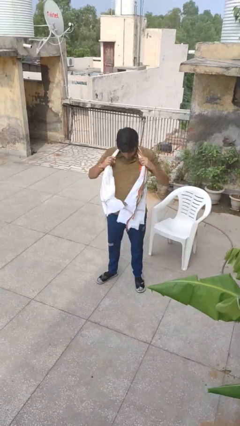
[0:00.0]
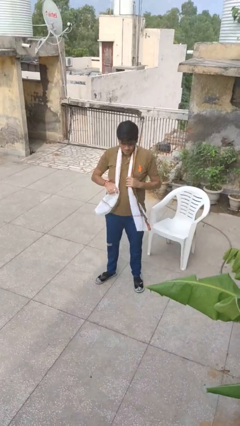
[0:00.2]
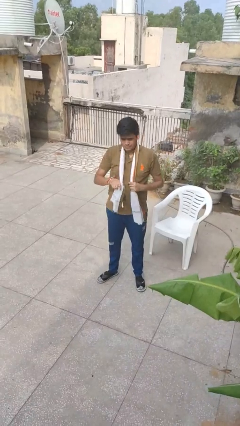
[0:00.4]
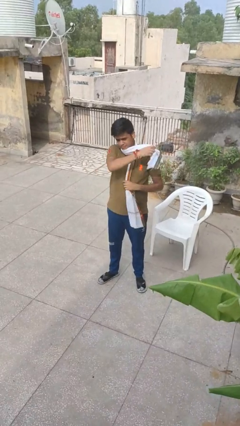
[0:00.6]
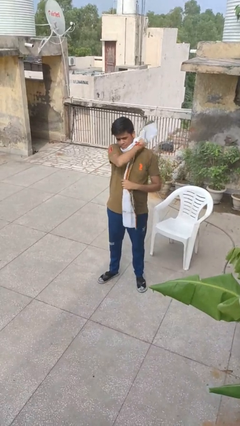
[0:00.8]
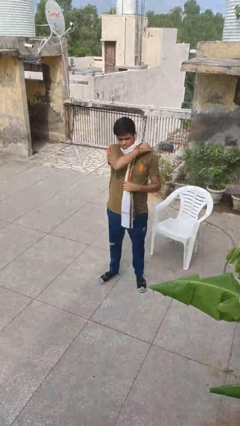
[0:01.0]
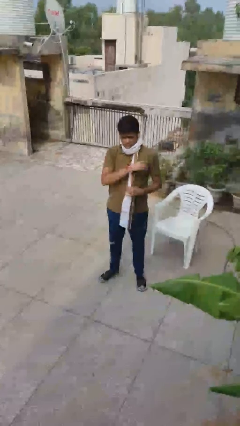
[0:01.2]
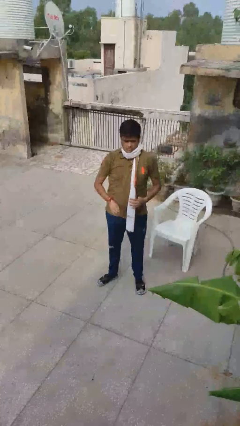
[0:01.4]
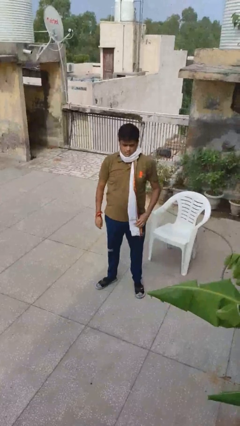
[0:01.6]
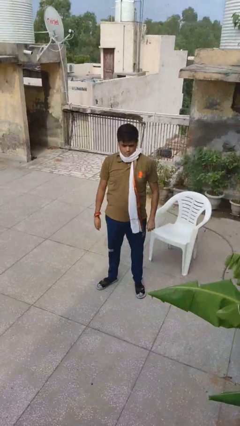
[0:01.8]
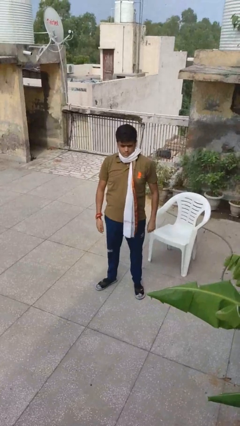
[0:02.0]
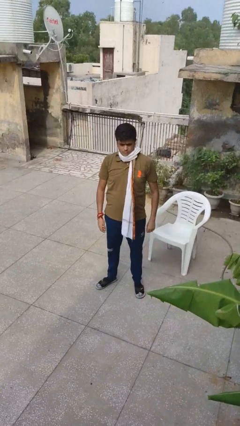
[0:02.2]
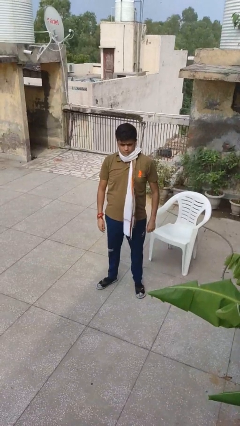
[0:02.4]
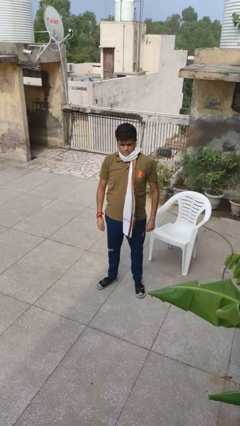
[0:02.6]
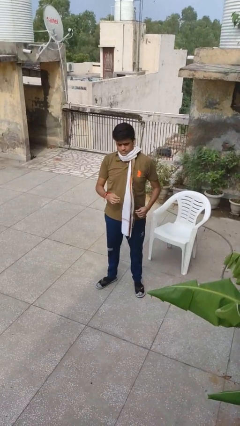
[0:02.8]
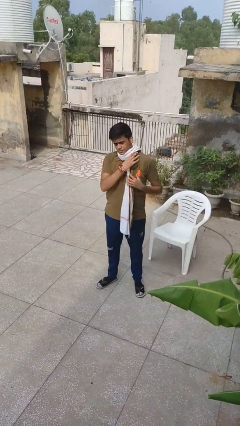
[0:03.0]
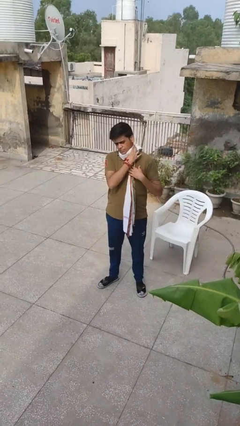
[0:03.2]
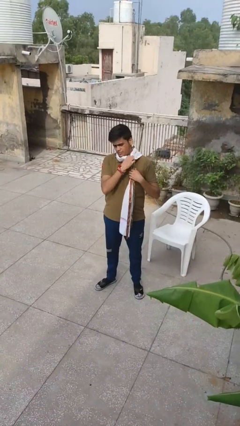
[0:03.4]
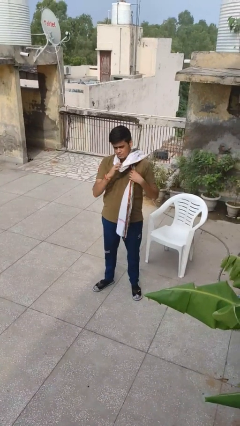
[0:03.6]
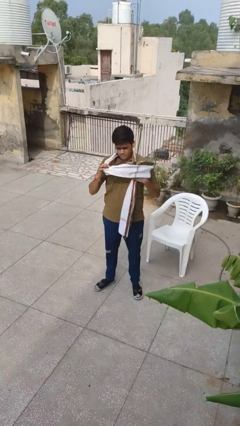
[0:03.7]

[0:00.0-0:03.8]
person puts on scarf

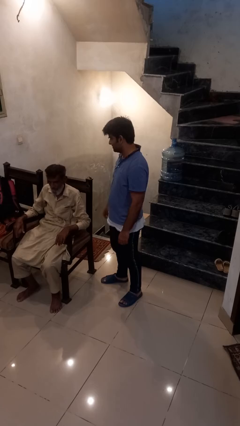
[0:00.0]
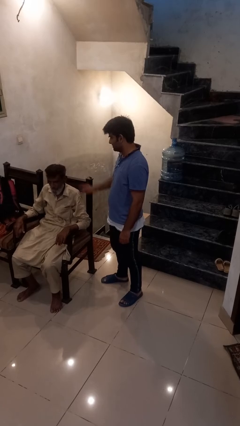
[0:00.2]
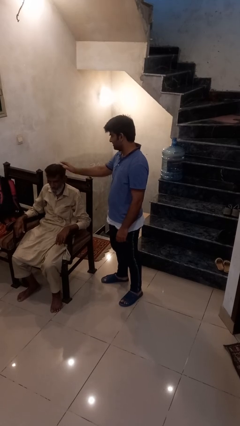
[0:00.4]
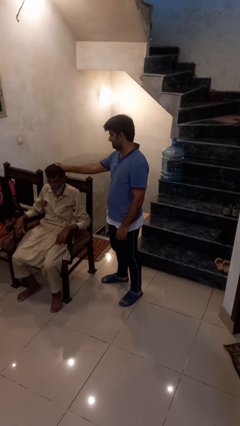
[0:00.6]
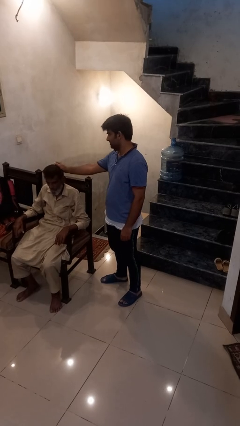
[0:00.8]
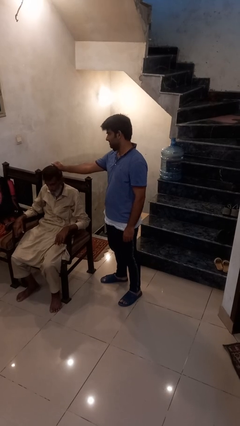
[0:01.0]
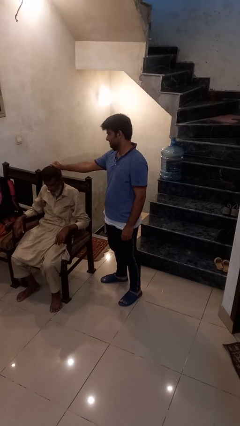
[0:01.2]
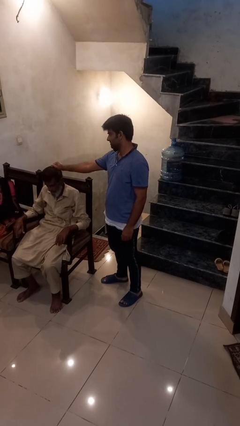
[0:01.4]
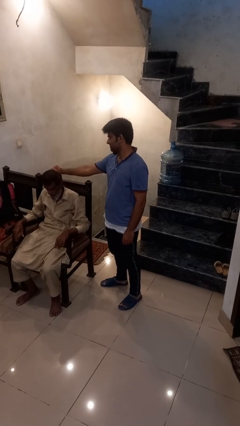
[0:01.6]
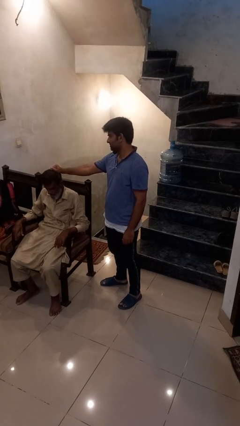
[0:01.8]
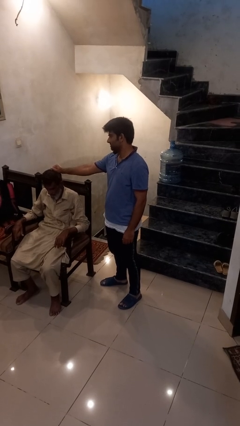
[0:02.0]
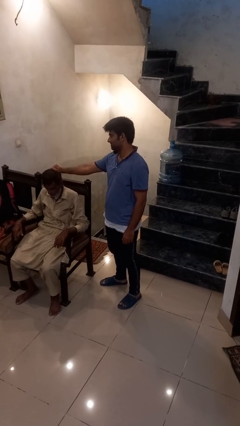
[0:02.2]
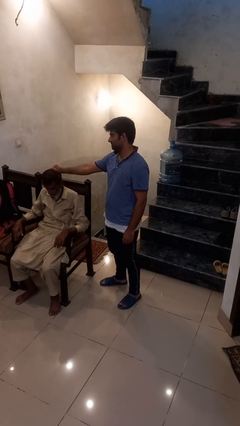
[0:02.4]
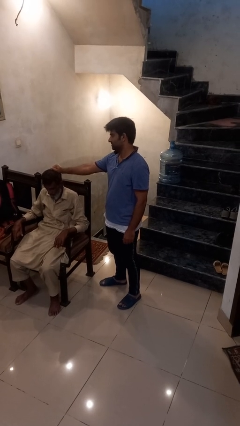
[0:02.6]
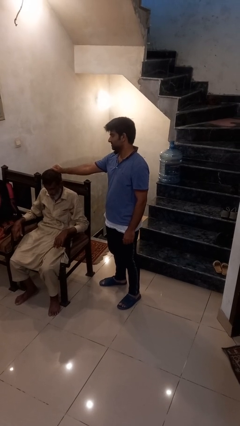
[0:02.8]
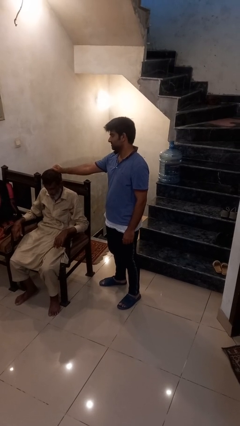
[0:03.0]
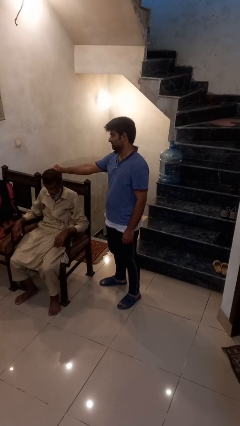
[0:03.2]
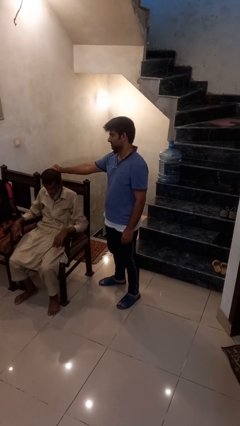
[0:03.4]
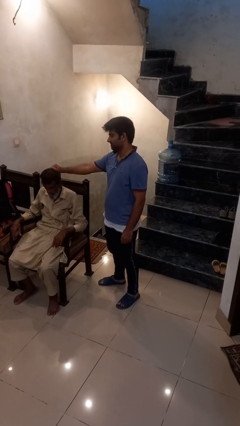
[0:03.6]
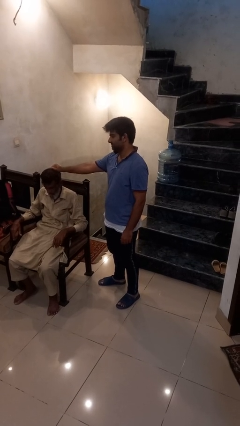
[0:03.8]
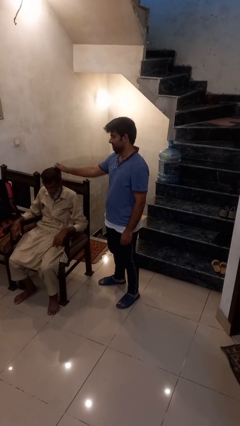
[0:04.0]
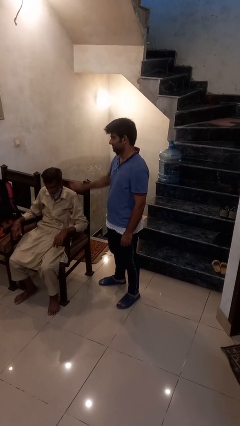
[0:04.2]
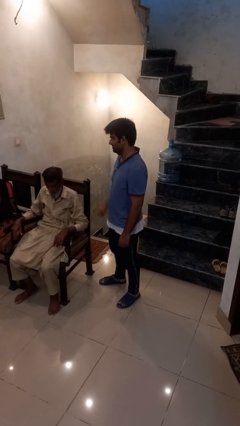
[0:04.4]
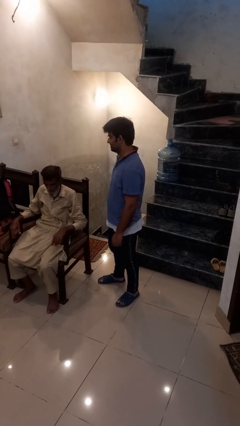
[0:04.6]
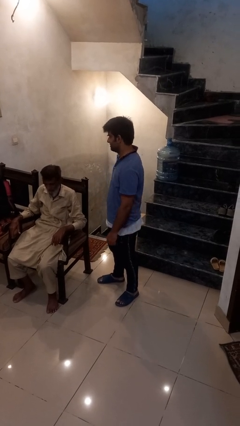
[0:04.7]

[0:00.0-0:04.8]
person grabs person by hair

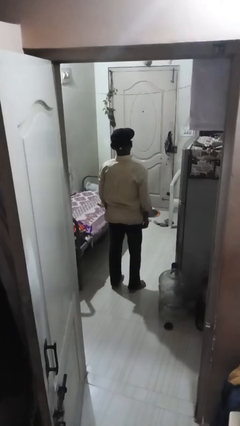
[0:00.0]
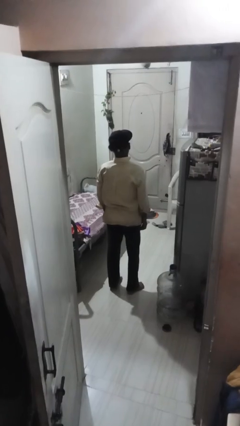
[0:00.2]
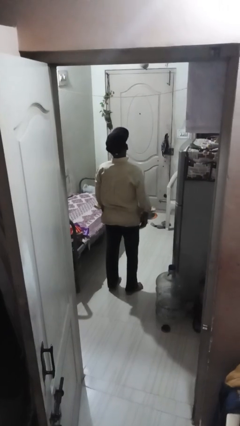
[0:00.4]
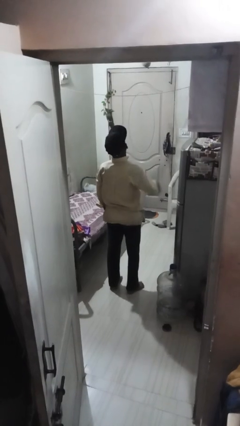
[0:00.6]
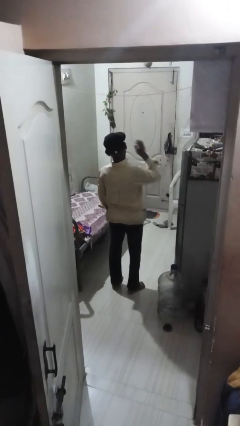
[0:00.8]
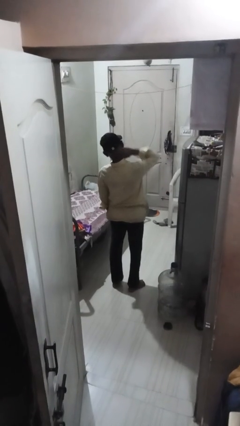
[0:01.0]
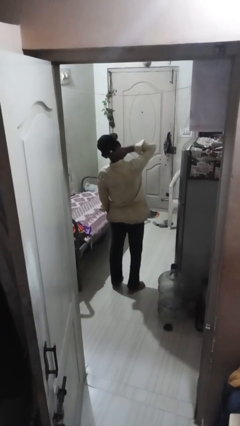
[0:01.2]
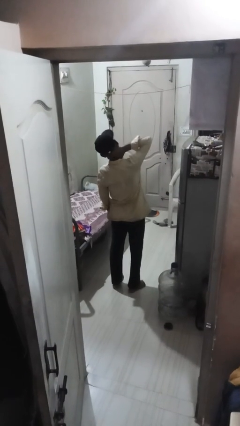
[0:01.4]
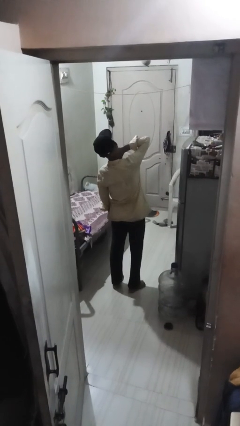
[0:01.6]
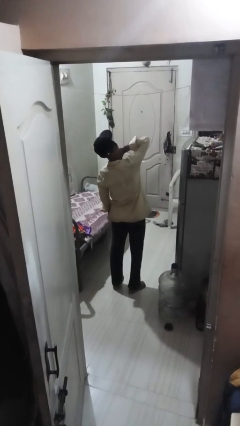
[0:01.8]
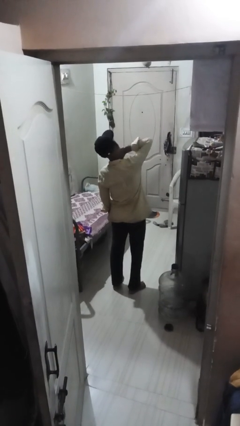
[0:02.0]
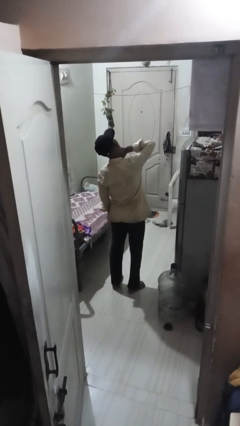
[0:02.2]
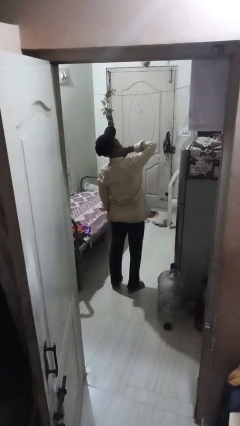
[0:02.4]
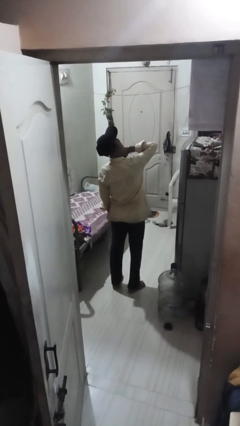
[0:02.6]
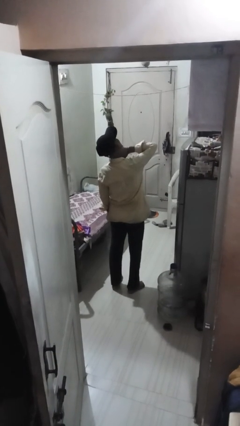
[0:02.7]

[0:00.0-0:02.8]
person rubs neck

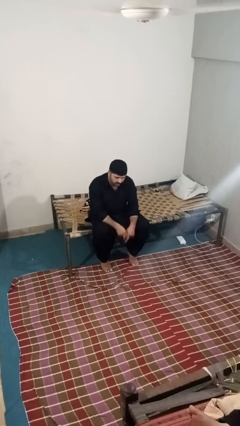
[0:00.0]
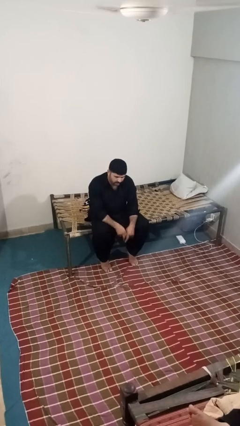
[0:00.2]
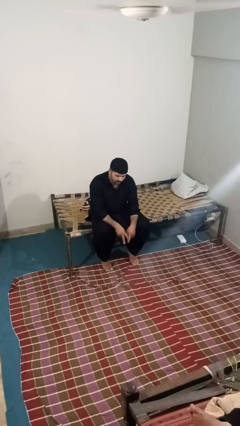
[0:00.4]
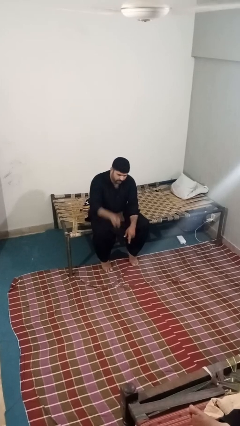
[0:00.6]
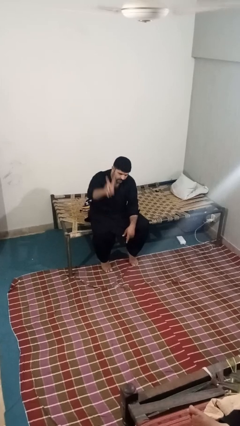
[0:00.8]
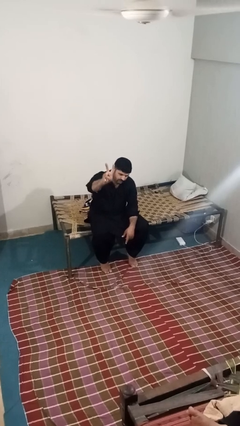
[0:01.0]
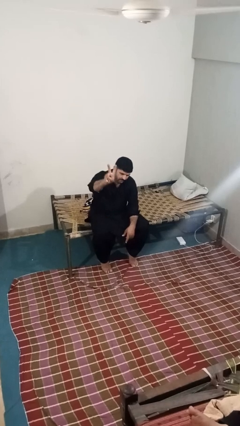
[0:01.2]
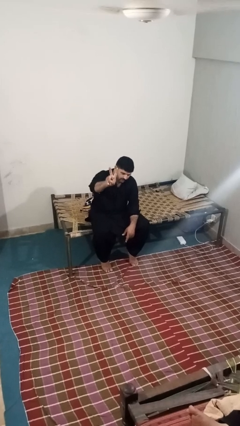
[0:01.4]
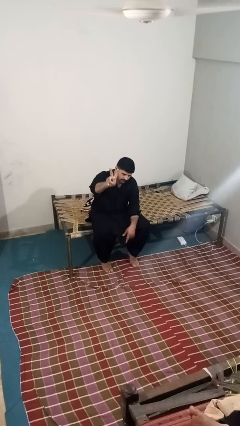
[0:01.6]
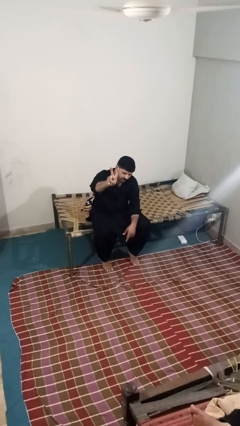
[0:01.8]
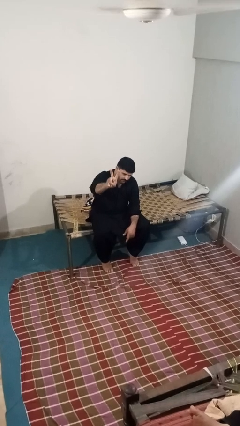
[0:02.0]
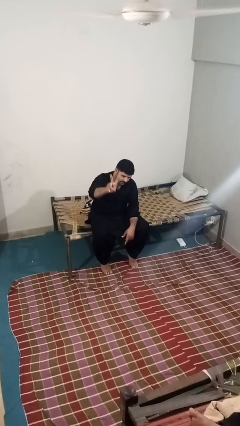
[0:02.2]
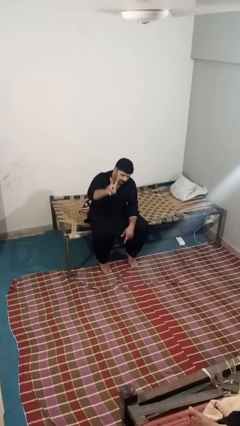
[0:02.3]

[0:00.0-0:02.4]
person gestures peace

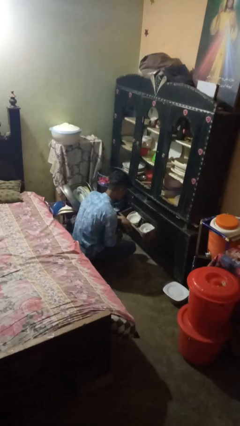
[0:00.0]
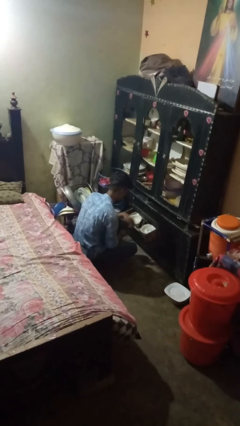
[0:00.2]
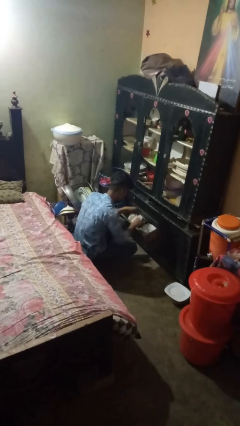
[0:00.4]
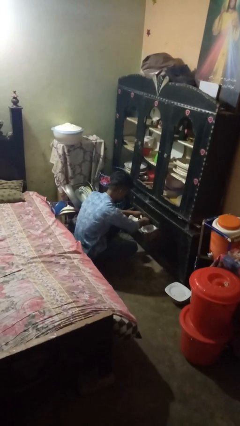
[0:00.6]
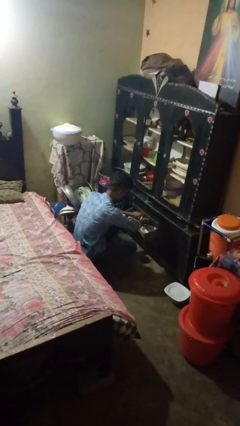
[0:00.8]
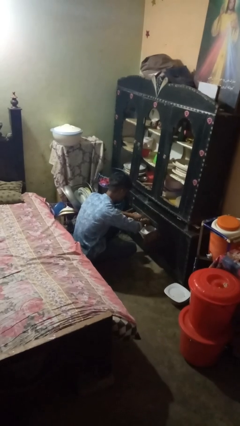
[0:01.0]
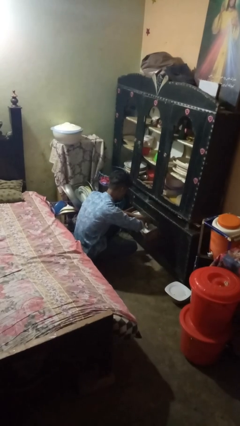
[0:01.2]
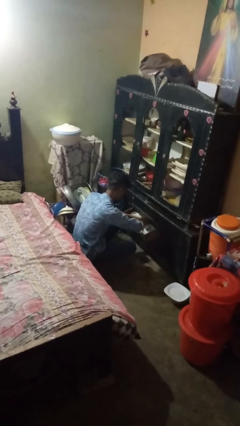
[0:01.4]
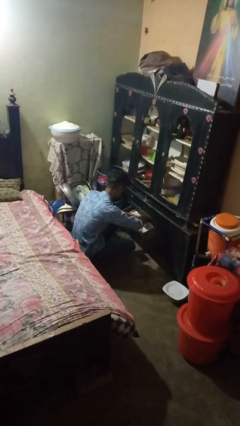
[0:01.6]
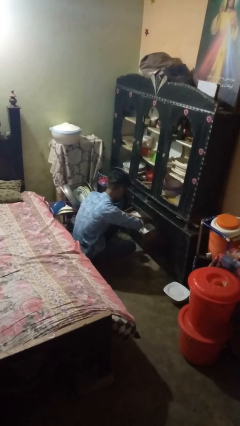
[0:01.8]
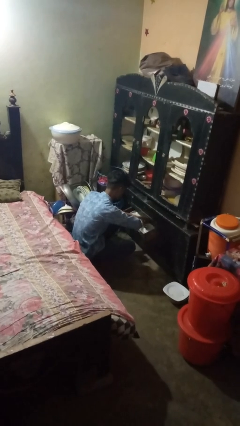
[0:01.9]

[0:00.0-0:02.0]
person searches in kitchen drawer

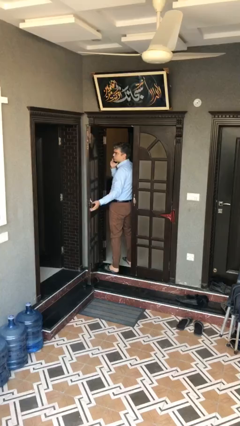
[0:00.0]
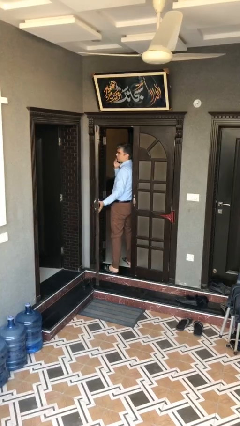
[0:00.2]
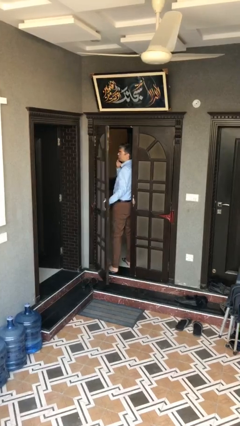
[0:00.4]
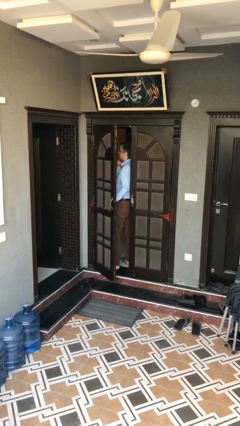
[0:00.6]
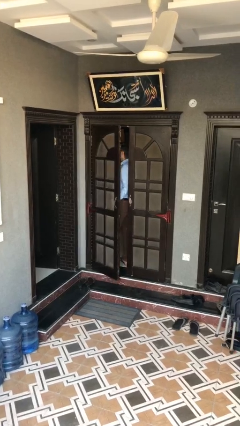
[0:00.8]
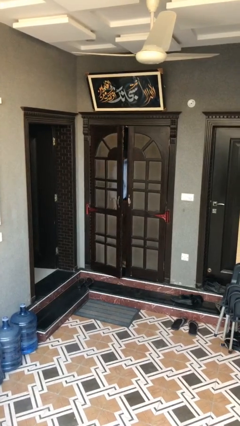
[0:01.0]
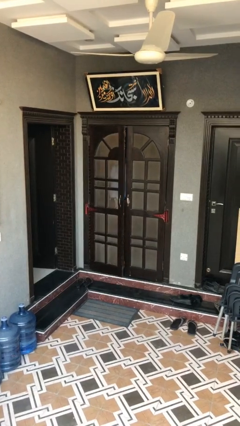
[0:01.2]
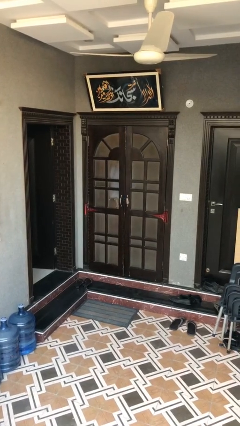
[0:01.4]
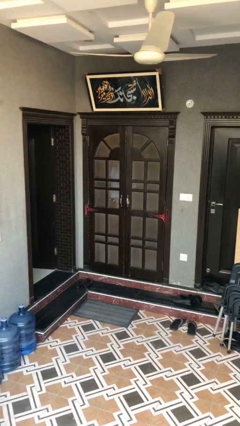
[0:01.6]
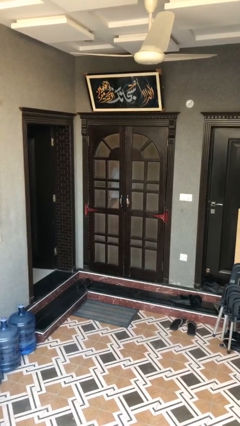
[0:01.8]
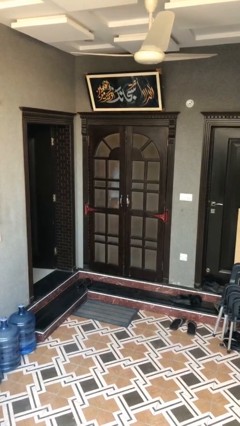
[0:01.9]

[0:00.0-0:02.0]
person closes facility door
